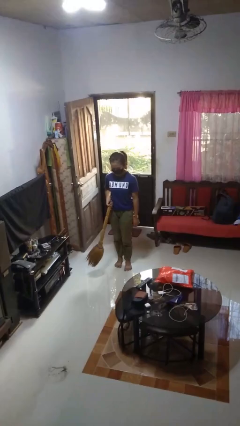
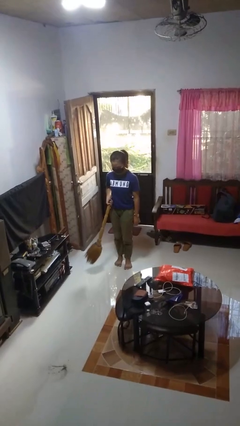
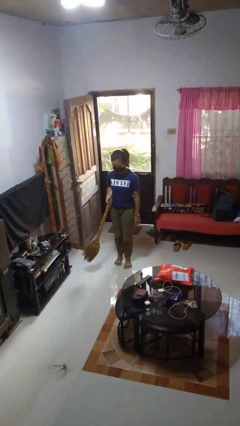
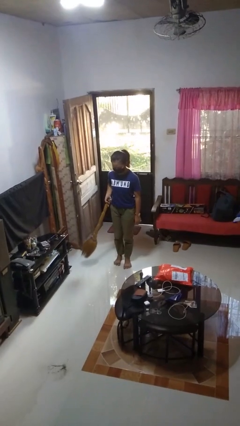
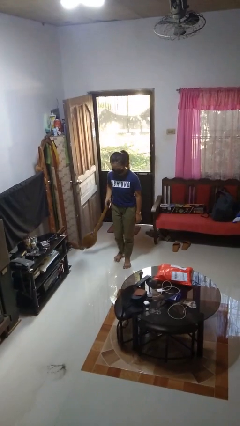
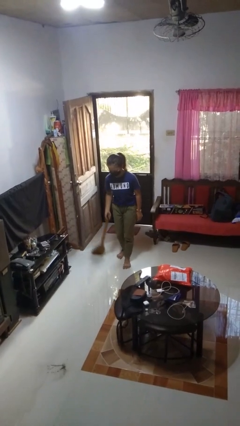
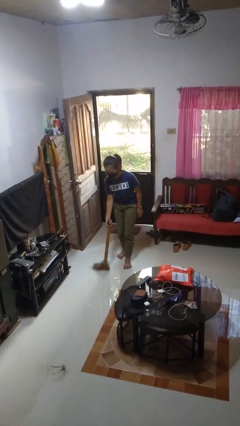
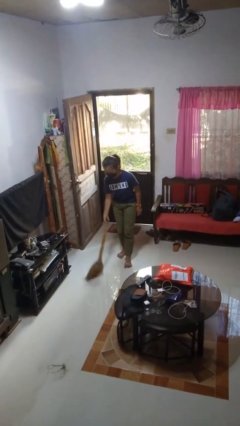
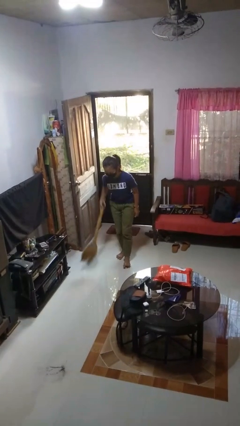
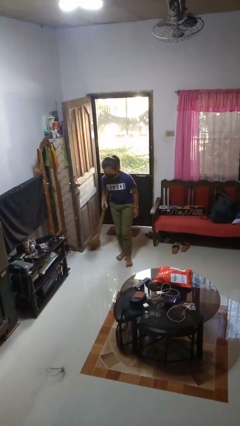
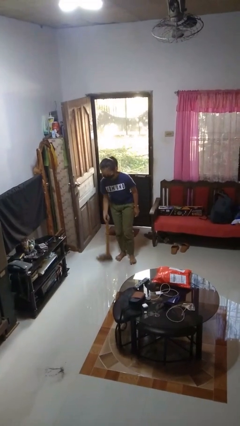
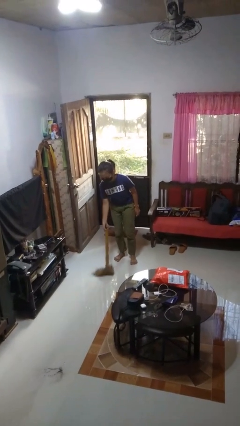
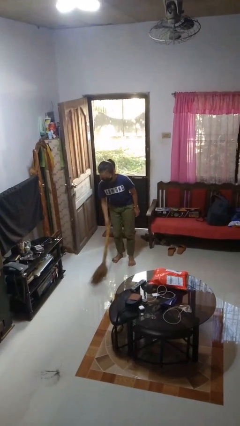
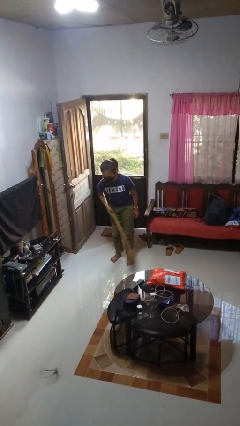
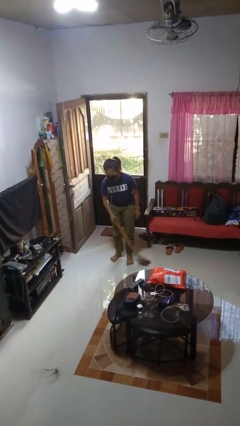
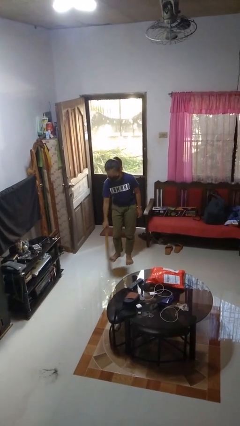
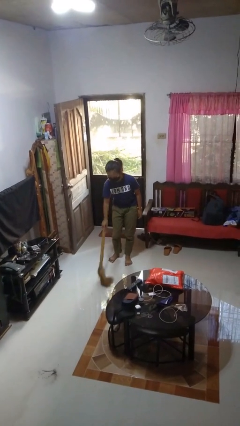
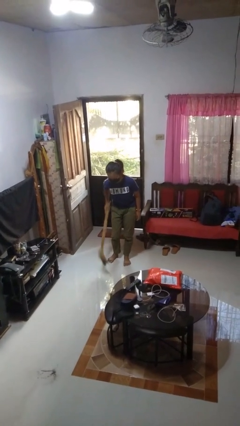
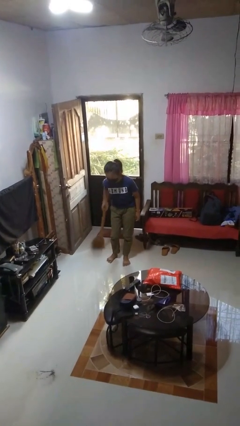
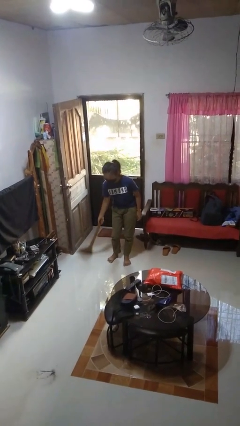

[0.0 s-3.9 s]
person sweeps floor

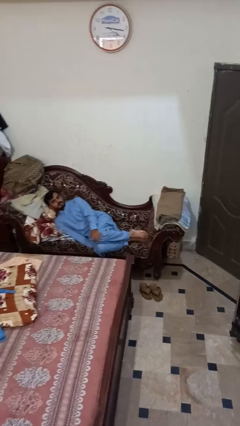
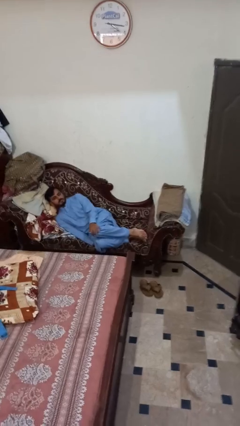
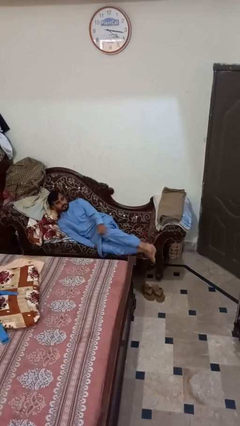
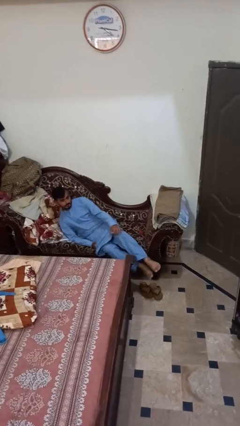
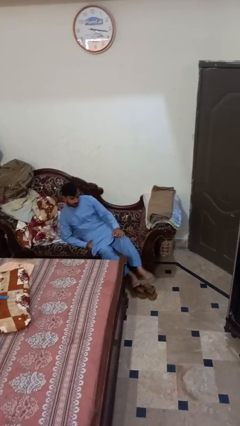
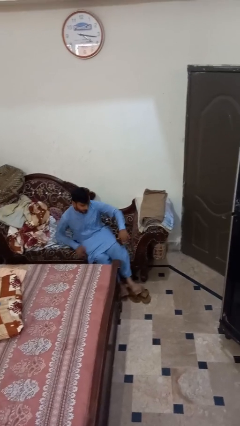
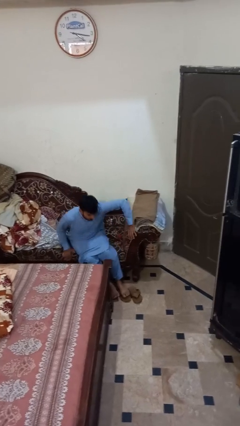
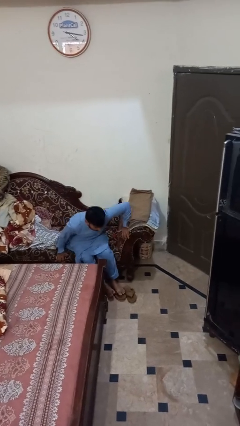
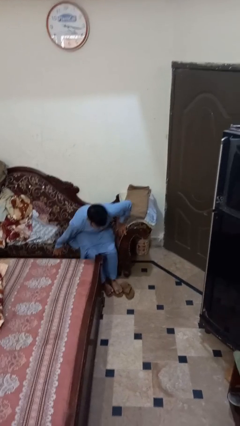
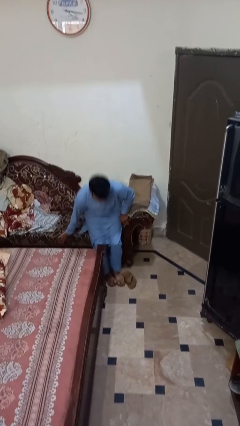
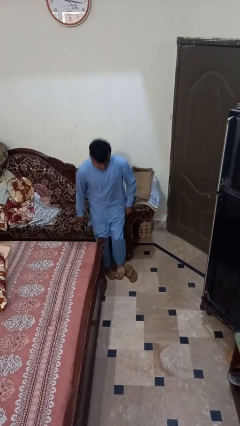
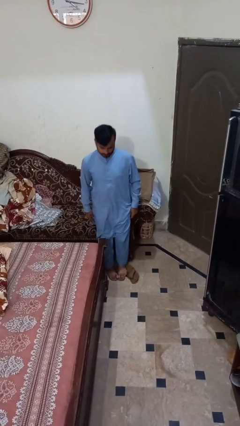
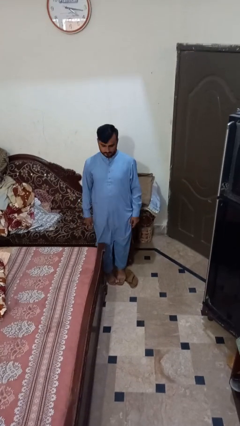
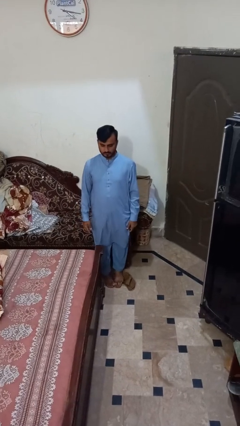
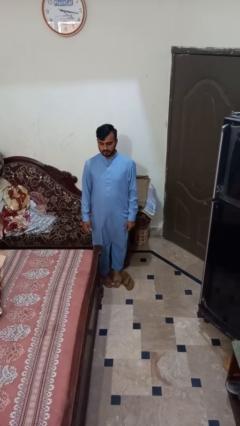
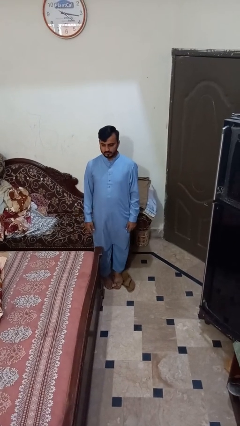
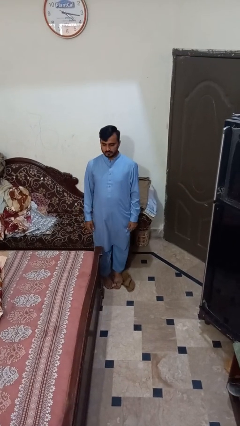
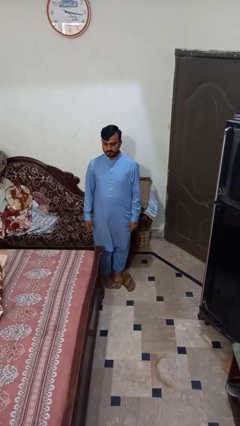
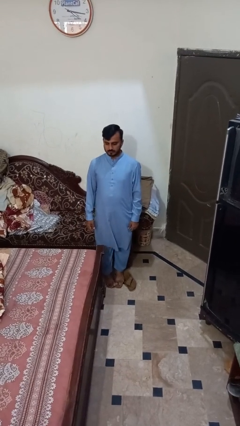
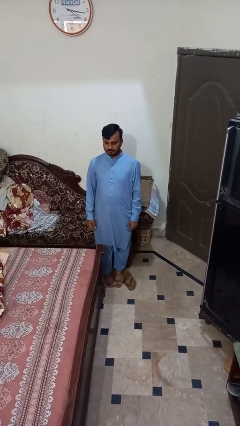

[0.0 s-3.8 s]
person stands up

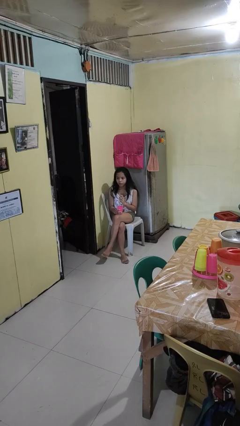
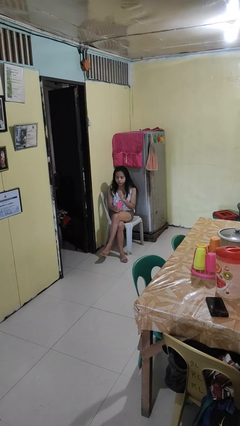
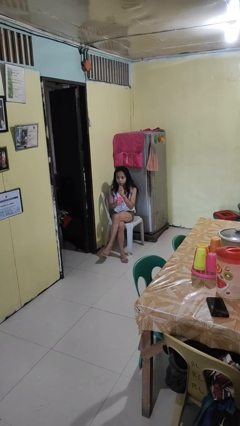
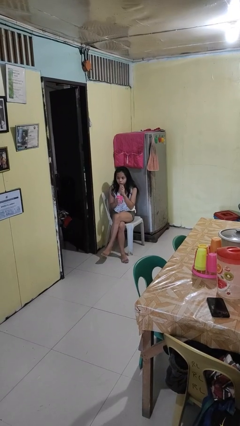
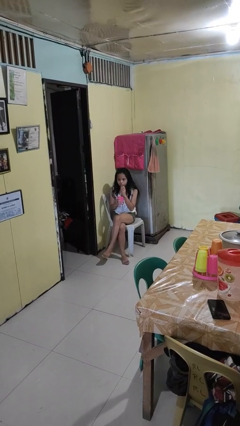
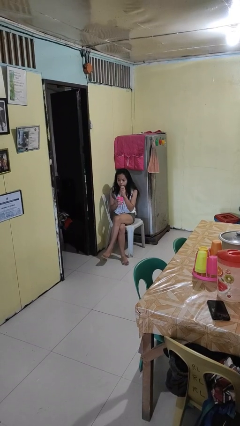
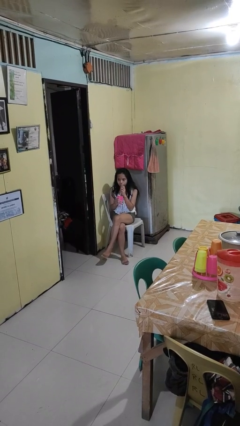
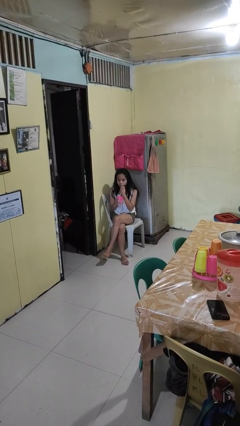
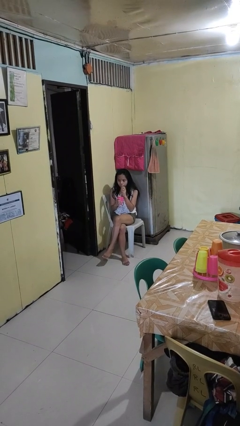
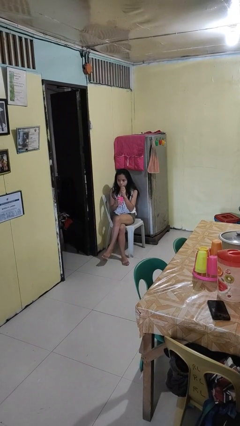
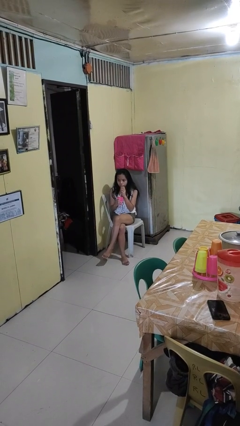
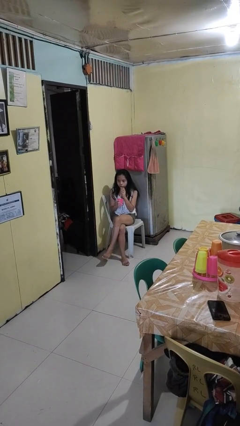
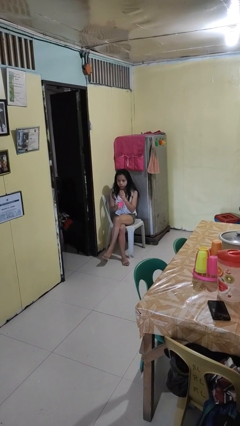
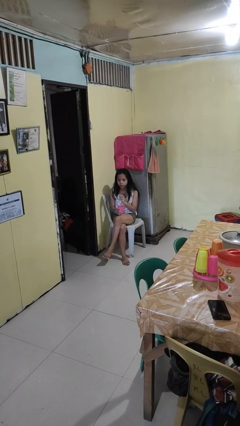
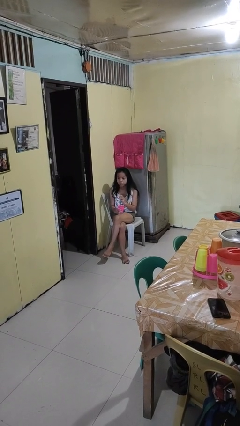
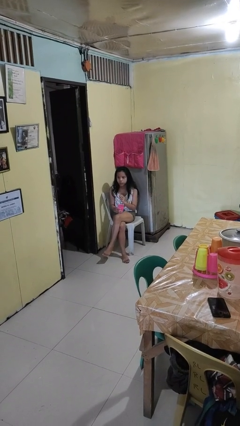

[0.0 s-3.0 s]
person drinks from straw

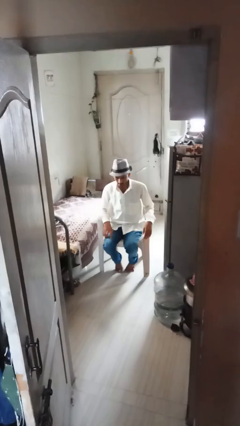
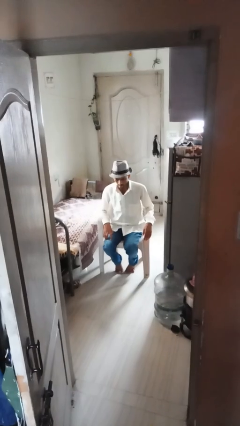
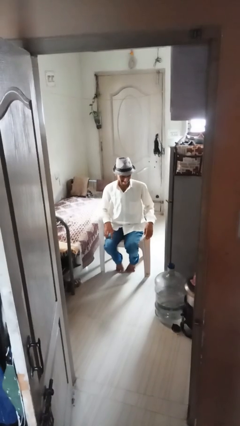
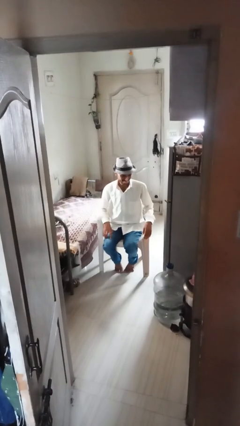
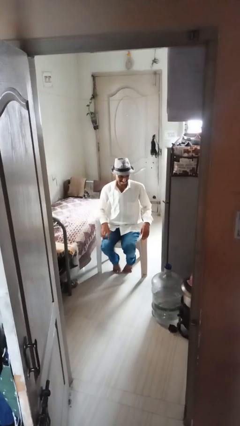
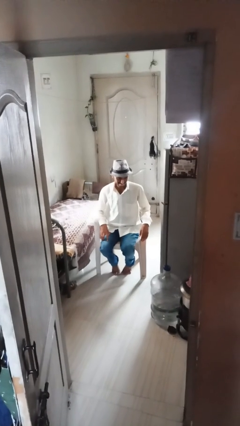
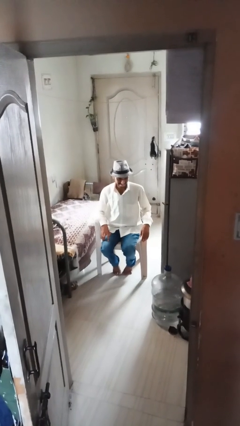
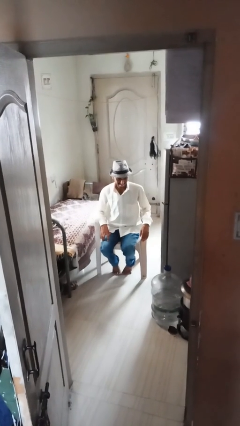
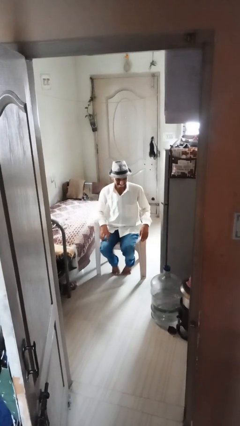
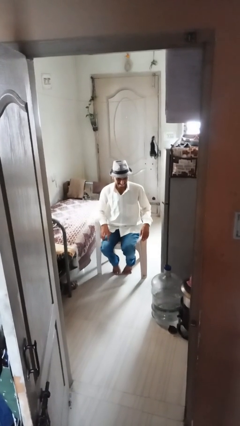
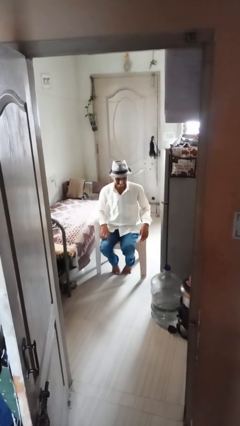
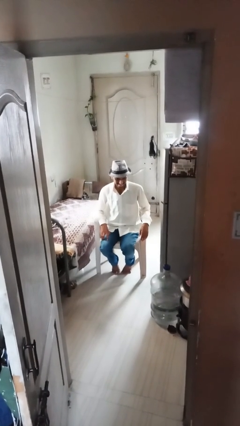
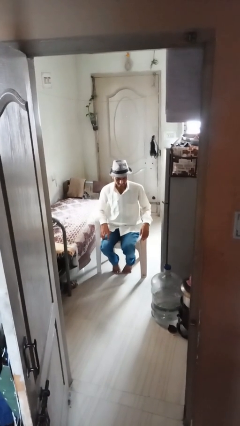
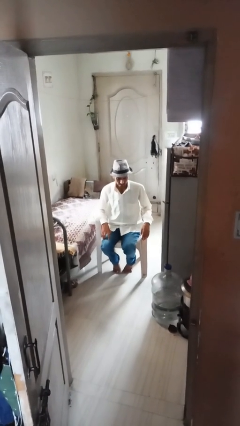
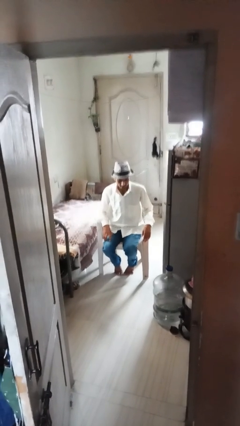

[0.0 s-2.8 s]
person sticks out tongue

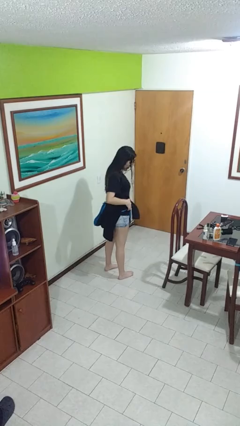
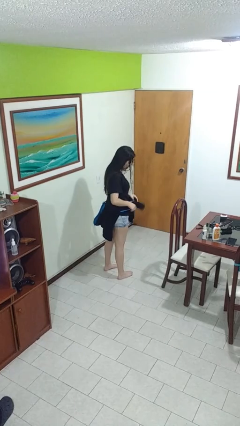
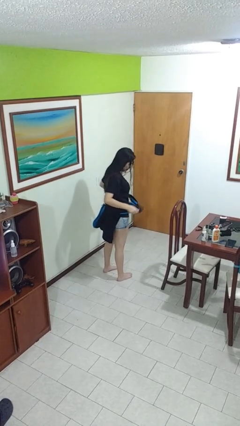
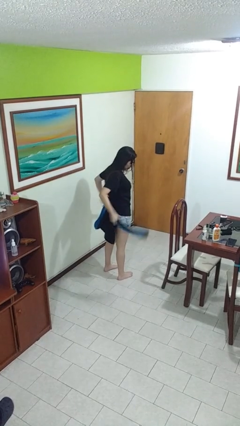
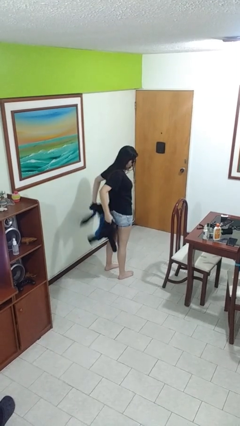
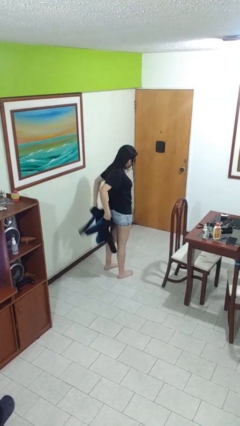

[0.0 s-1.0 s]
person unties jacket around waist

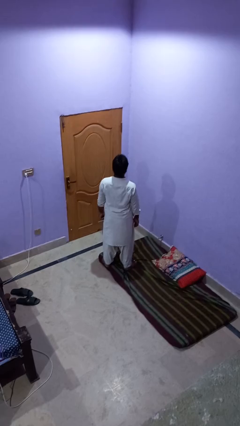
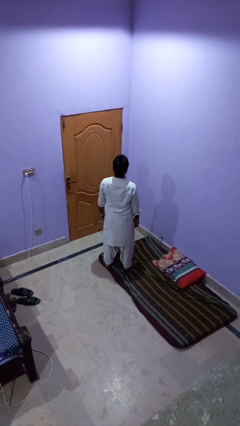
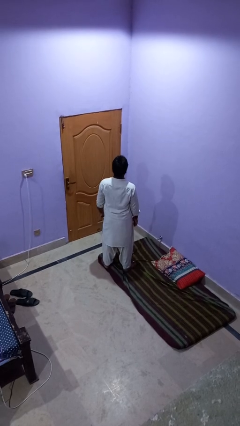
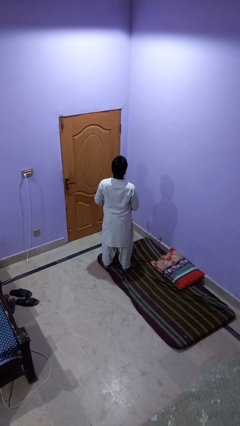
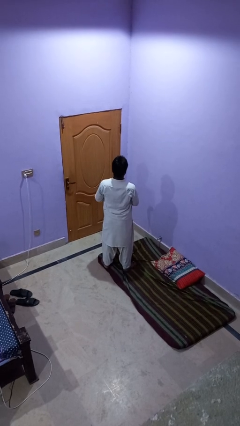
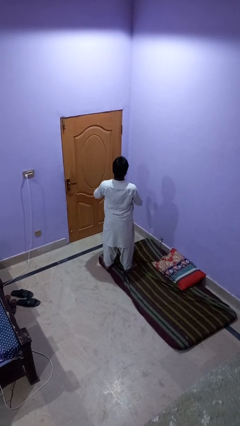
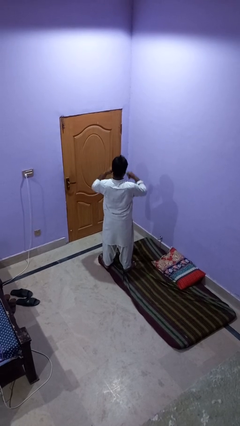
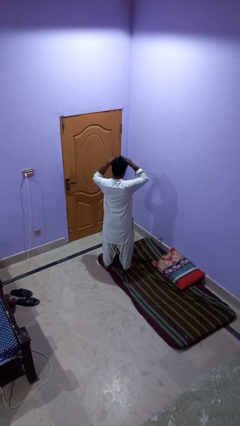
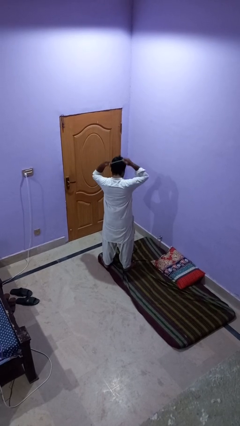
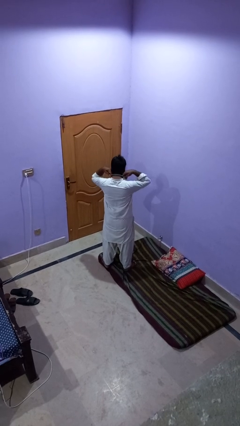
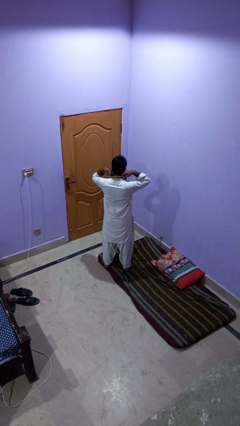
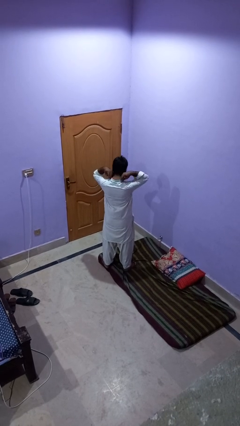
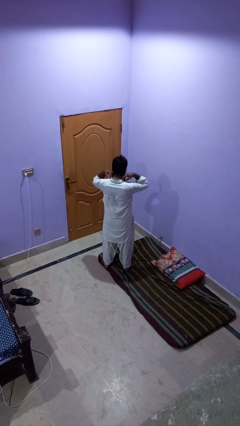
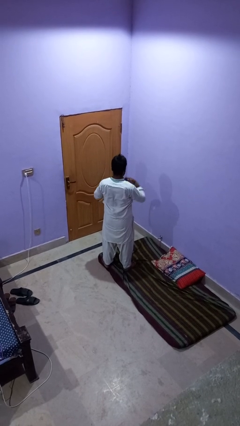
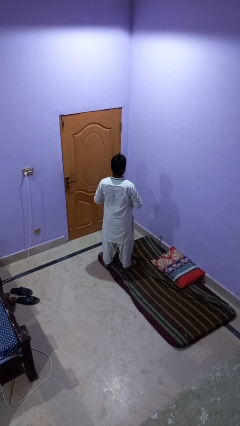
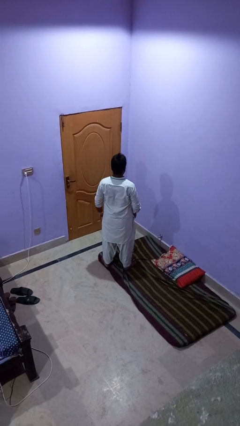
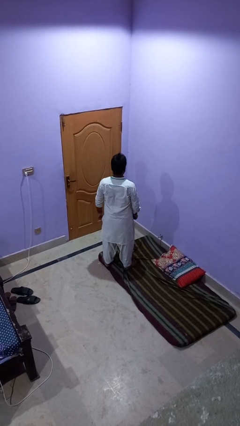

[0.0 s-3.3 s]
person puts on necklace
